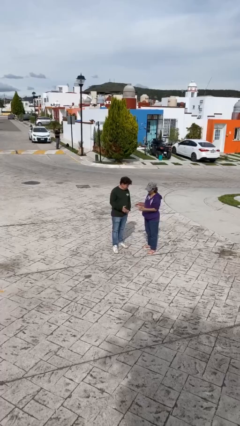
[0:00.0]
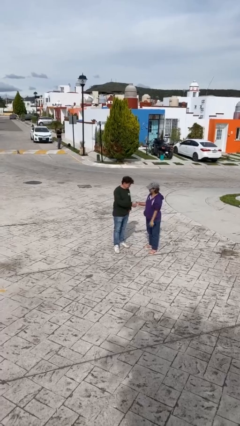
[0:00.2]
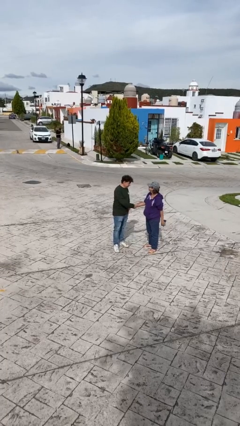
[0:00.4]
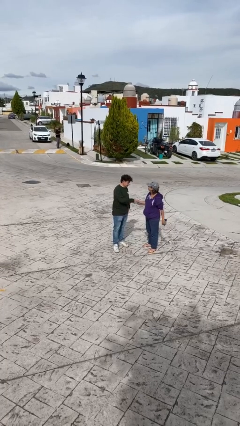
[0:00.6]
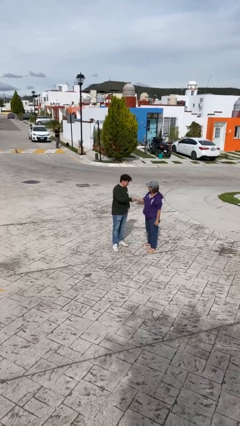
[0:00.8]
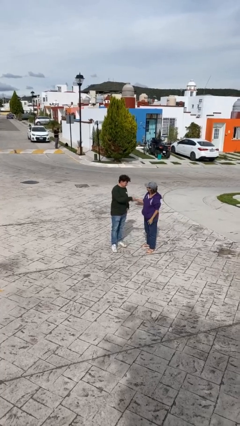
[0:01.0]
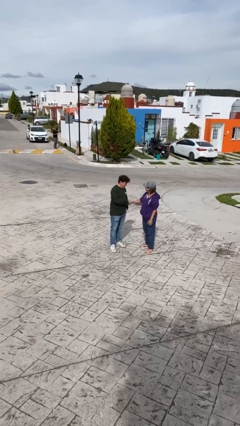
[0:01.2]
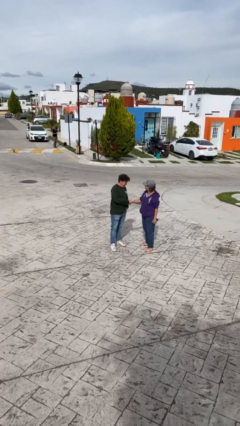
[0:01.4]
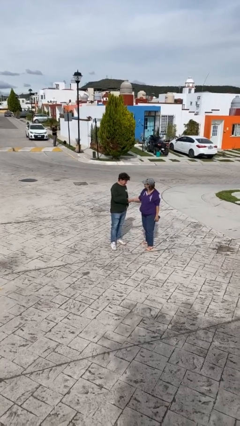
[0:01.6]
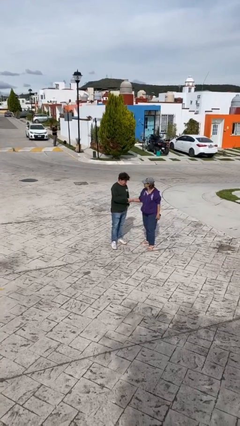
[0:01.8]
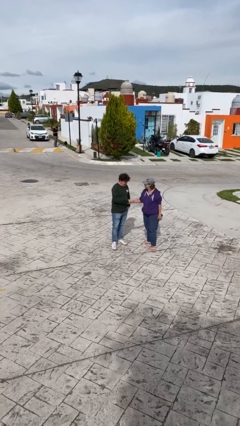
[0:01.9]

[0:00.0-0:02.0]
person shakes hand

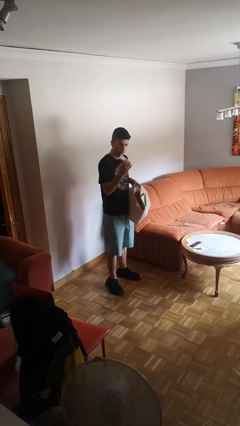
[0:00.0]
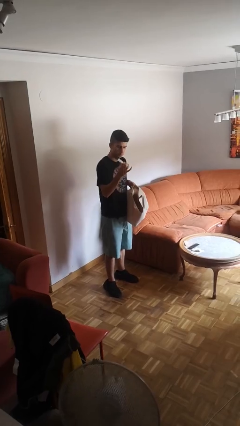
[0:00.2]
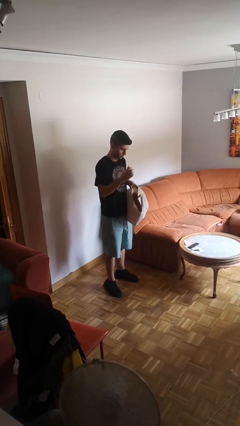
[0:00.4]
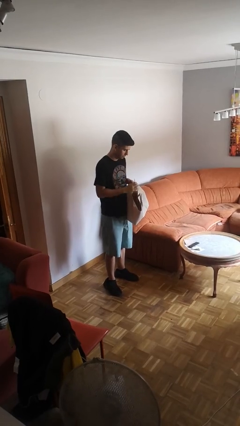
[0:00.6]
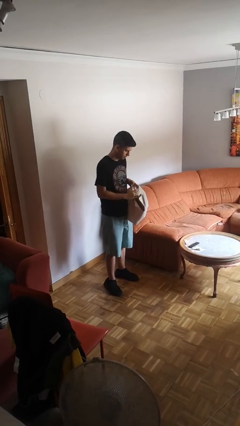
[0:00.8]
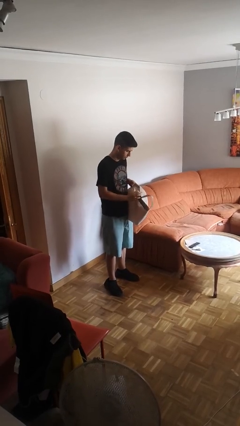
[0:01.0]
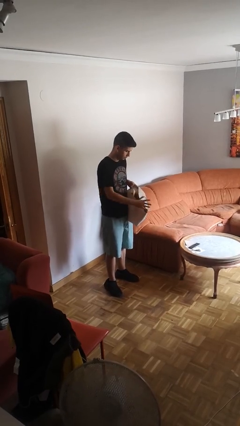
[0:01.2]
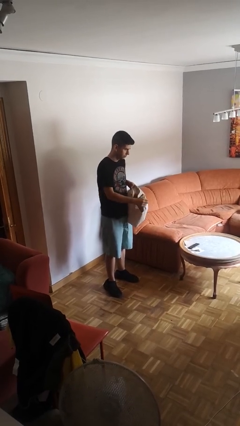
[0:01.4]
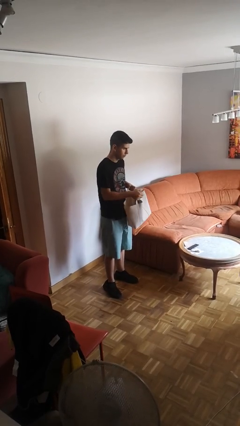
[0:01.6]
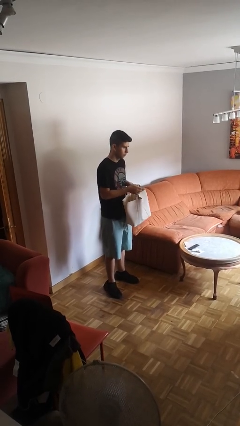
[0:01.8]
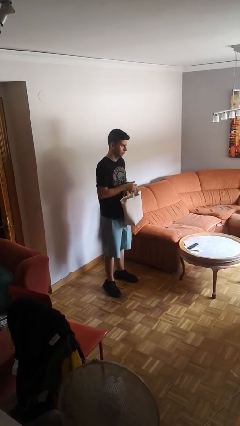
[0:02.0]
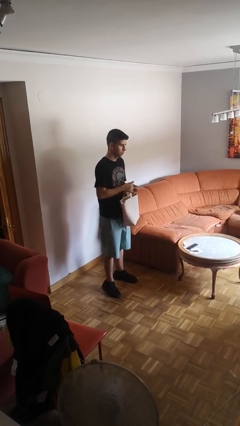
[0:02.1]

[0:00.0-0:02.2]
person puts object into purse

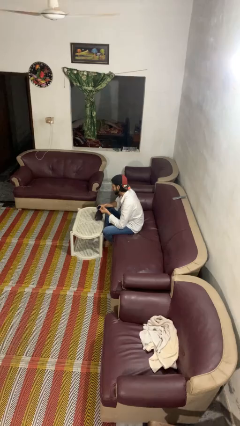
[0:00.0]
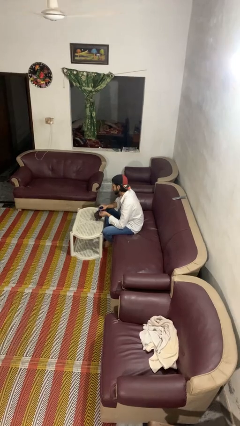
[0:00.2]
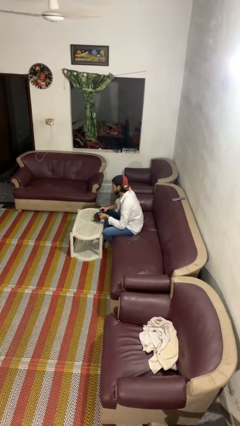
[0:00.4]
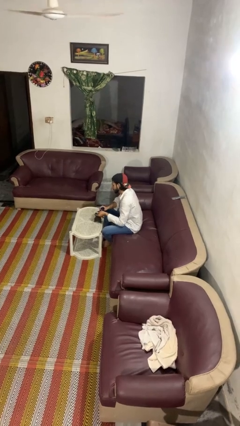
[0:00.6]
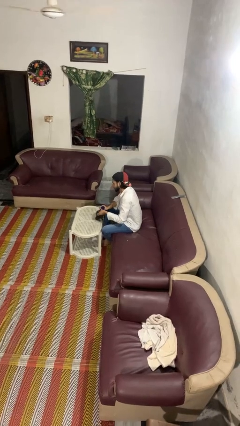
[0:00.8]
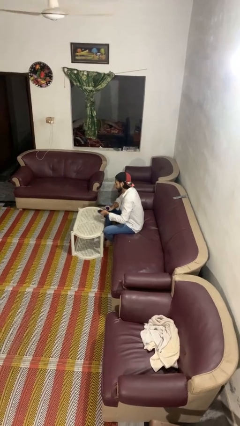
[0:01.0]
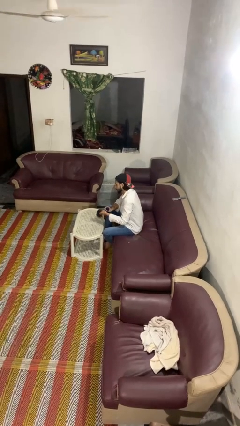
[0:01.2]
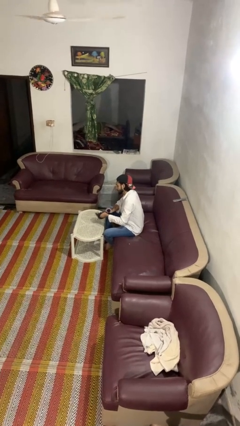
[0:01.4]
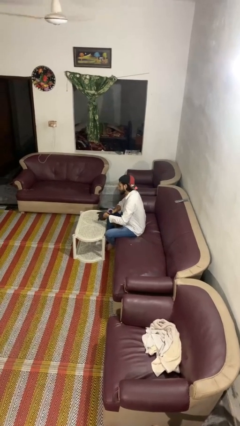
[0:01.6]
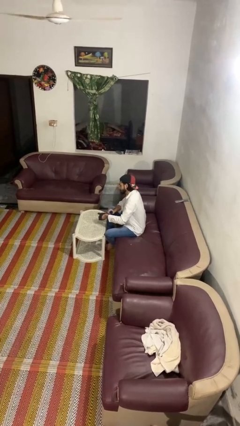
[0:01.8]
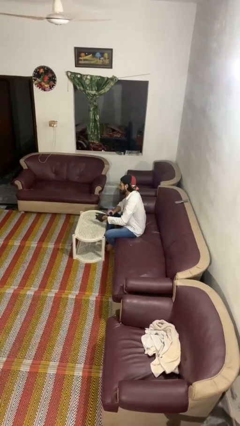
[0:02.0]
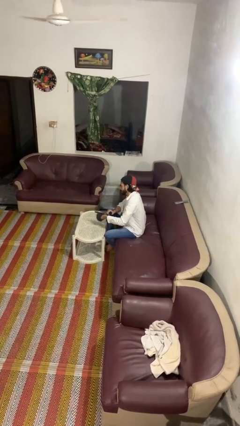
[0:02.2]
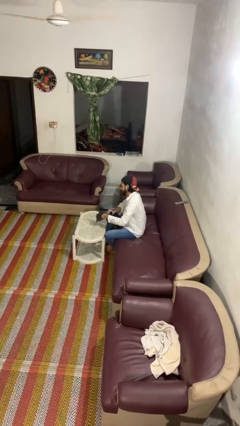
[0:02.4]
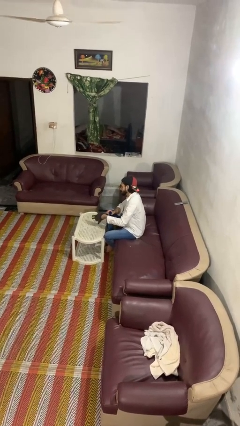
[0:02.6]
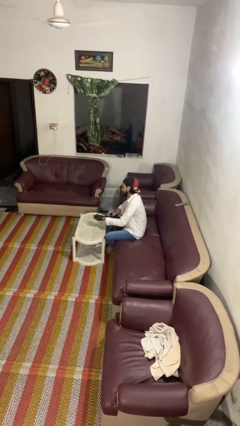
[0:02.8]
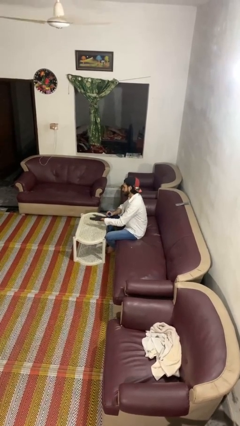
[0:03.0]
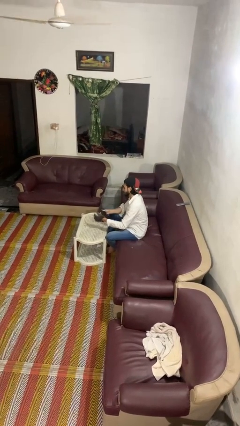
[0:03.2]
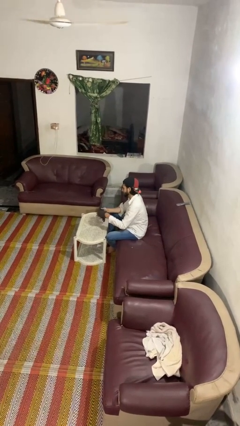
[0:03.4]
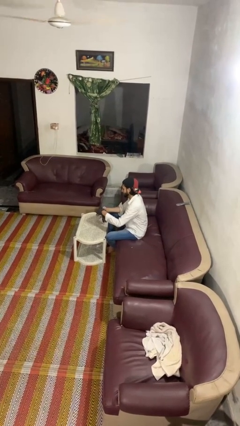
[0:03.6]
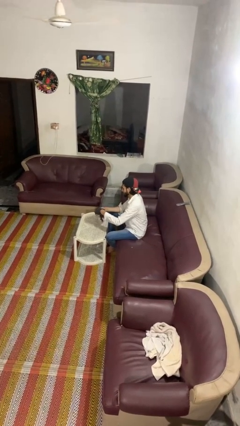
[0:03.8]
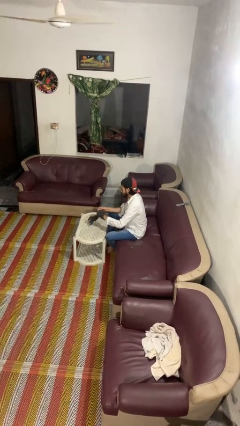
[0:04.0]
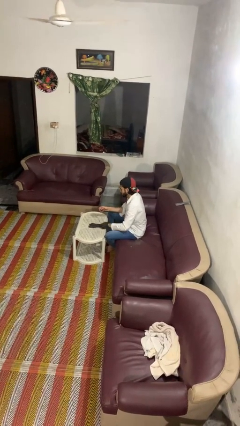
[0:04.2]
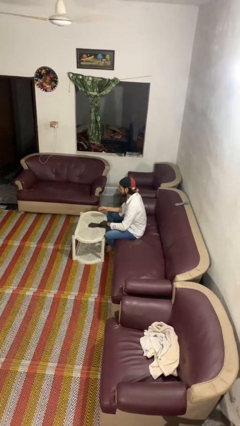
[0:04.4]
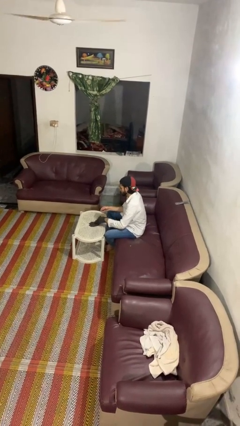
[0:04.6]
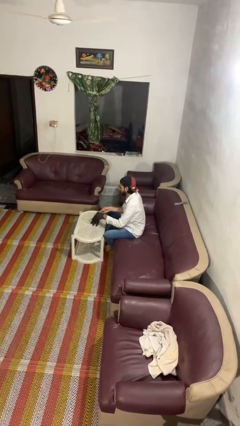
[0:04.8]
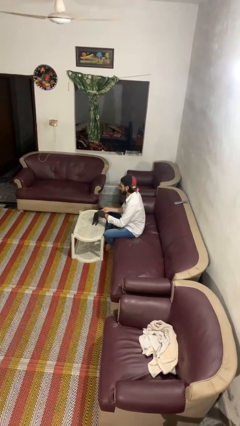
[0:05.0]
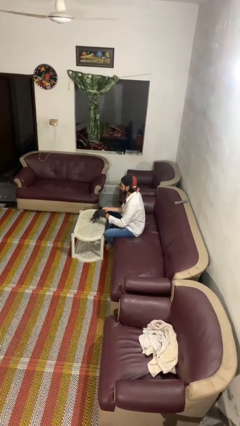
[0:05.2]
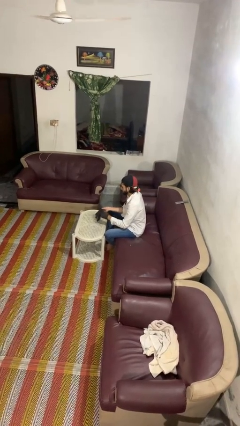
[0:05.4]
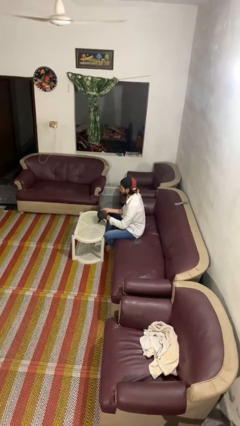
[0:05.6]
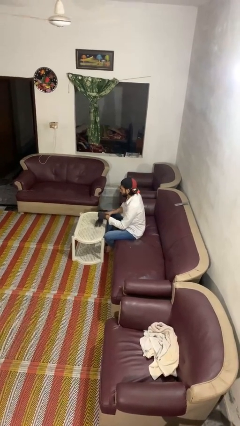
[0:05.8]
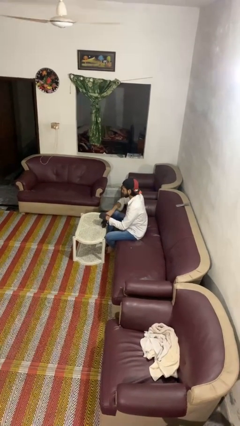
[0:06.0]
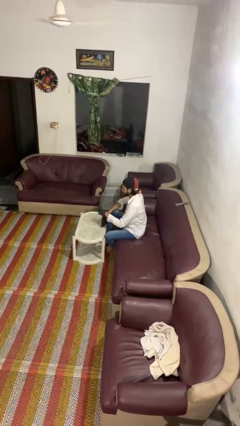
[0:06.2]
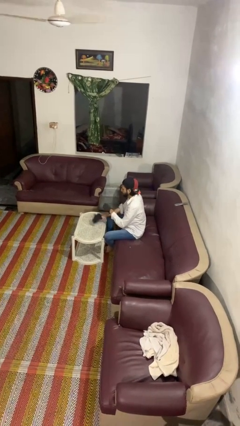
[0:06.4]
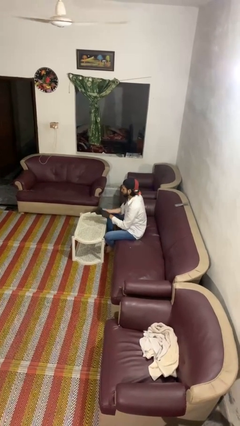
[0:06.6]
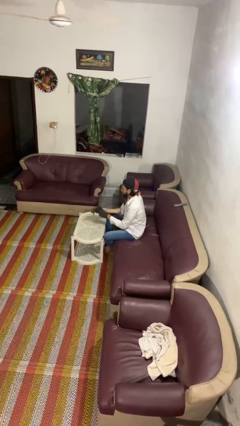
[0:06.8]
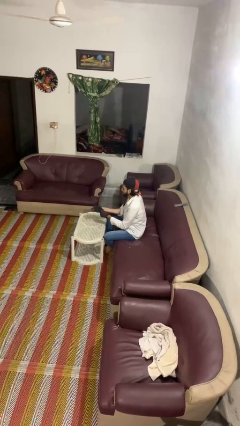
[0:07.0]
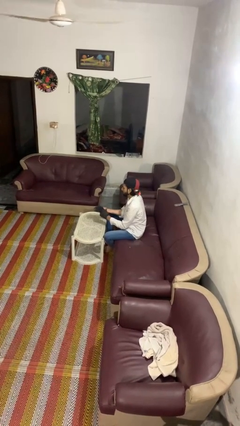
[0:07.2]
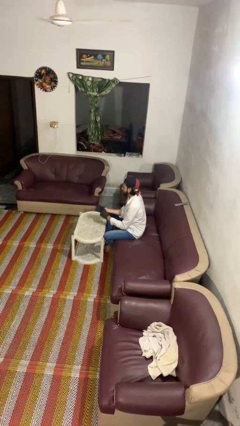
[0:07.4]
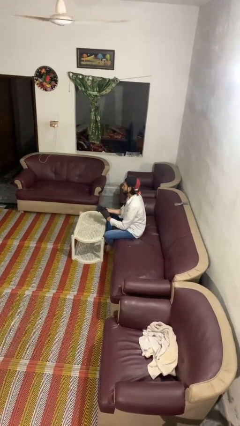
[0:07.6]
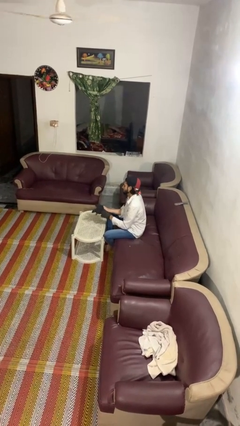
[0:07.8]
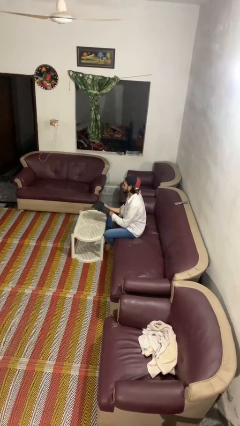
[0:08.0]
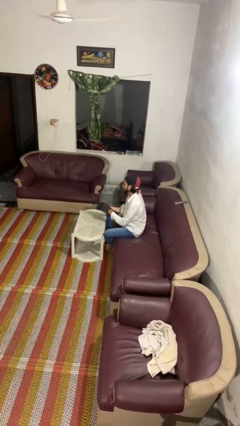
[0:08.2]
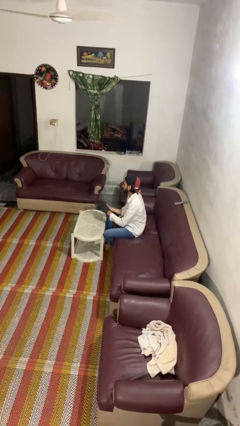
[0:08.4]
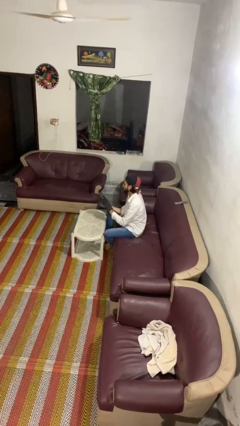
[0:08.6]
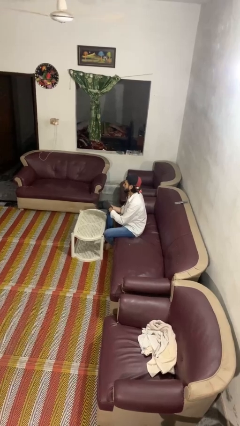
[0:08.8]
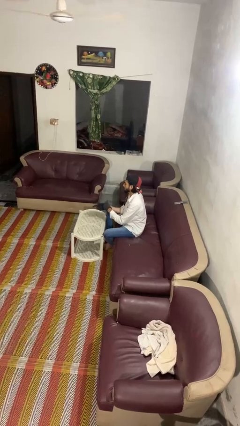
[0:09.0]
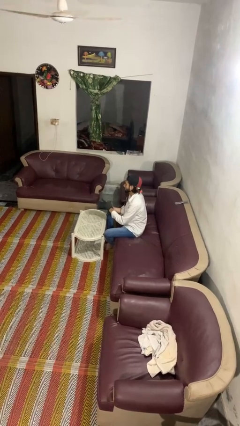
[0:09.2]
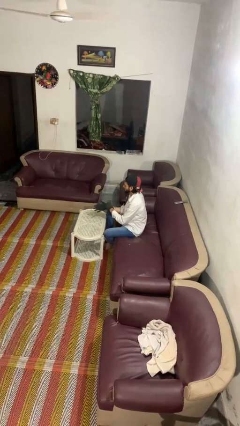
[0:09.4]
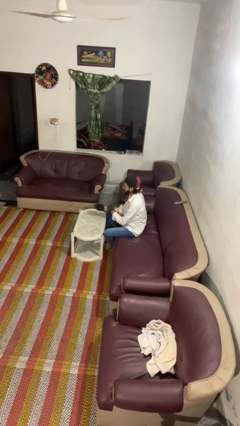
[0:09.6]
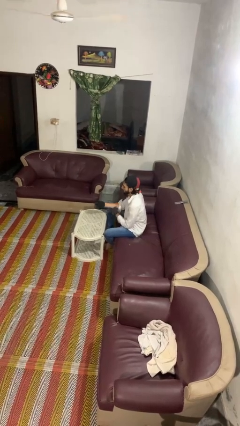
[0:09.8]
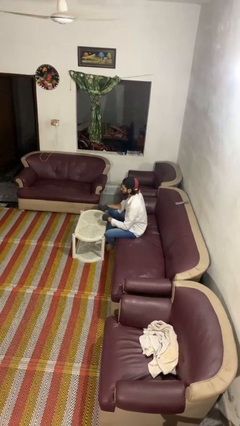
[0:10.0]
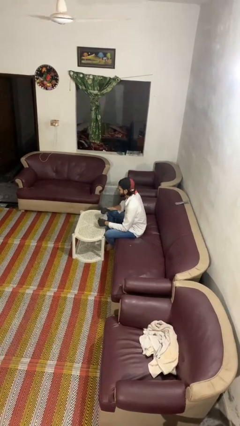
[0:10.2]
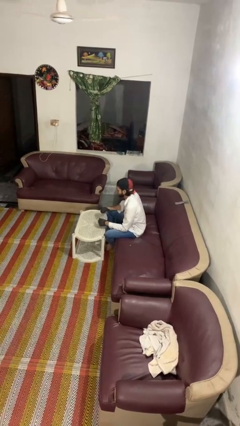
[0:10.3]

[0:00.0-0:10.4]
person puts on gloves

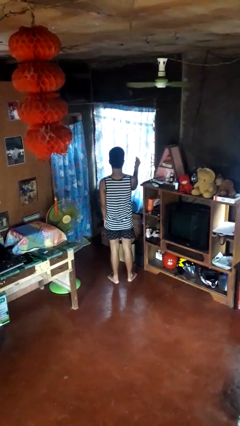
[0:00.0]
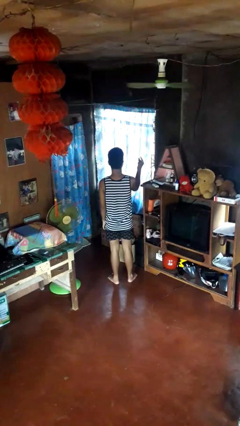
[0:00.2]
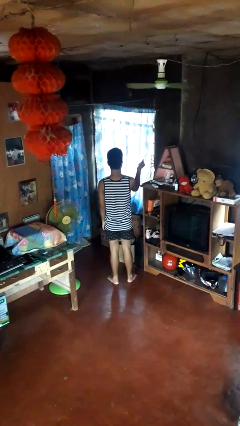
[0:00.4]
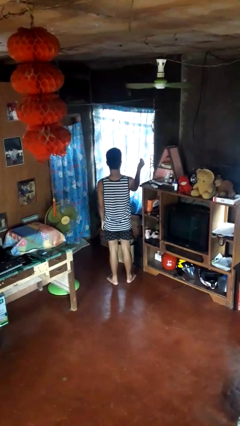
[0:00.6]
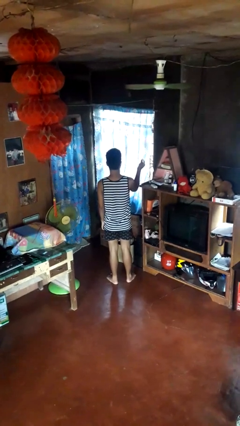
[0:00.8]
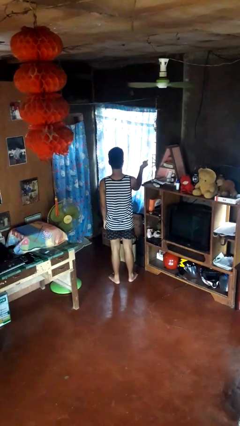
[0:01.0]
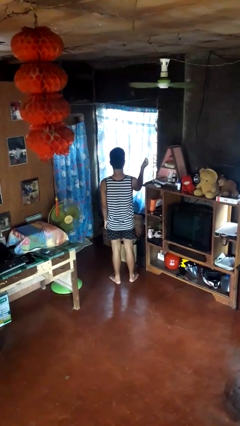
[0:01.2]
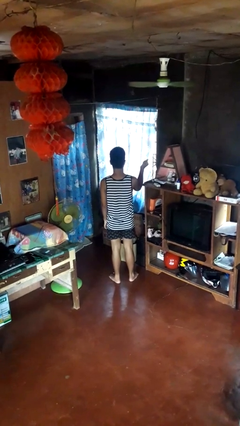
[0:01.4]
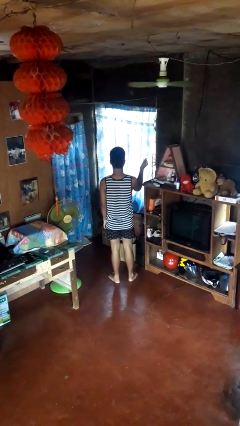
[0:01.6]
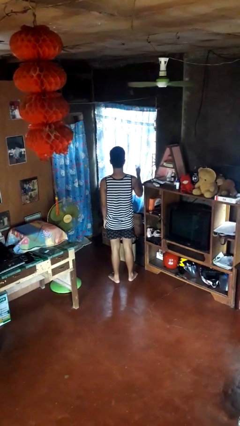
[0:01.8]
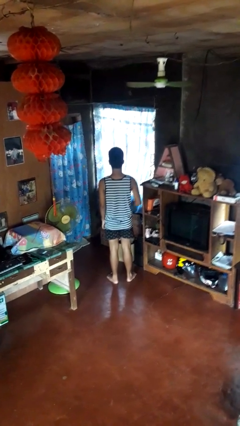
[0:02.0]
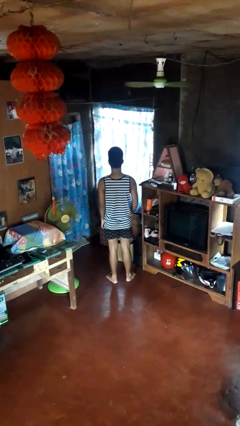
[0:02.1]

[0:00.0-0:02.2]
person snaps fingers

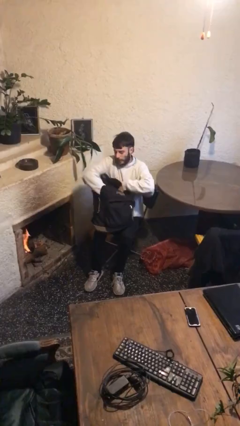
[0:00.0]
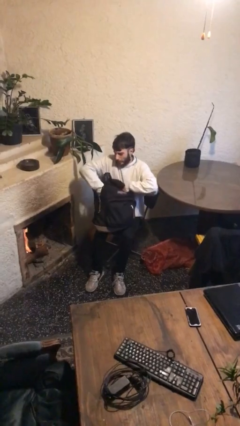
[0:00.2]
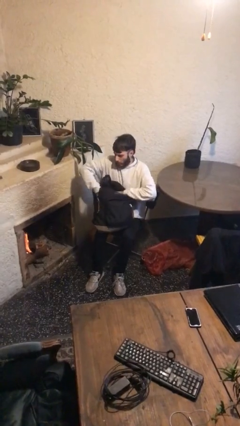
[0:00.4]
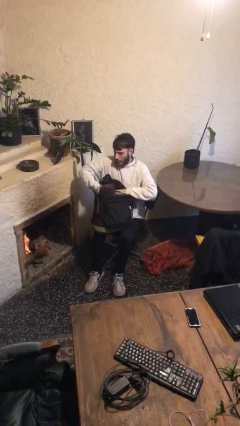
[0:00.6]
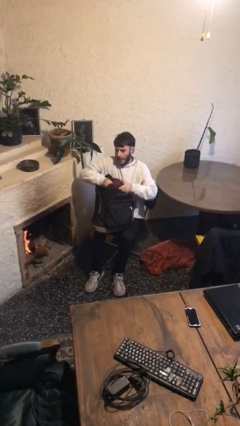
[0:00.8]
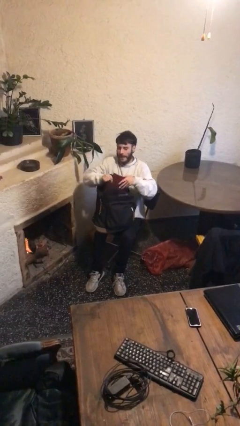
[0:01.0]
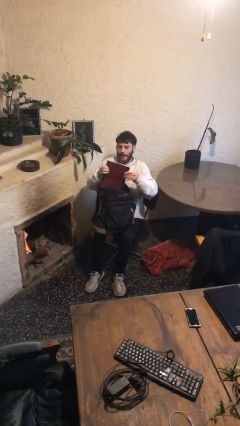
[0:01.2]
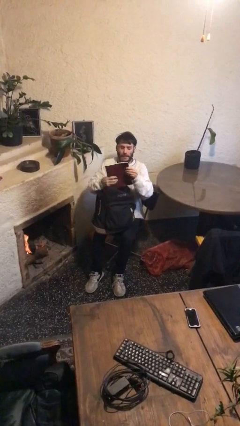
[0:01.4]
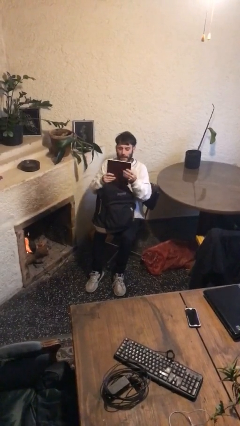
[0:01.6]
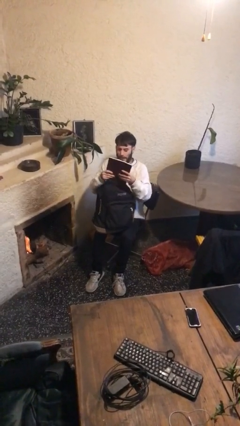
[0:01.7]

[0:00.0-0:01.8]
person takes object from backpack
